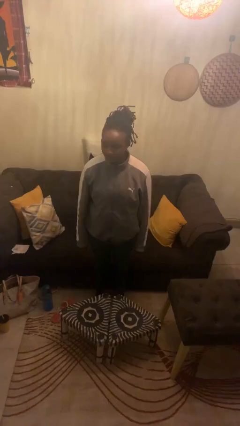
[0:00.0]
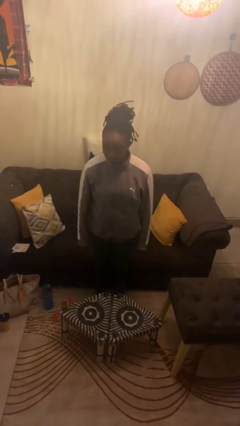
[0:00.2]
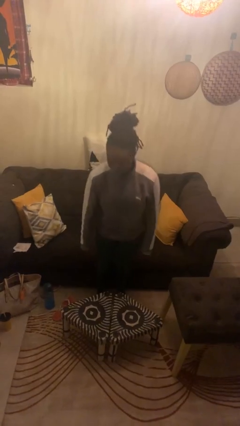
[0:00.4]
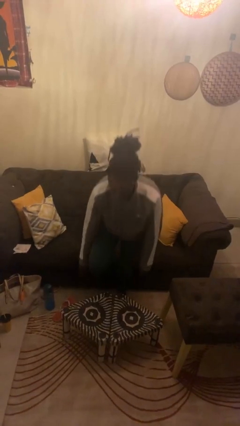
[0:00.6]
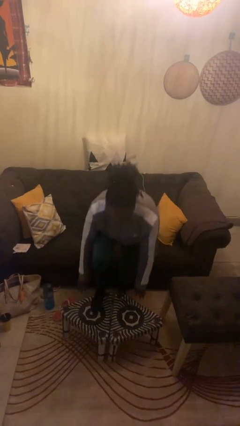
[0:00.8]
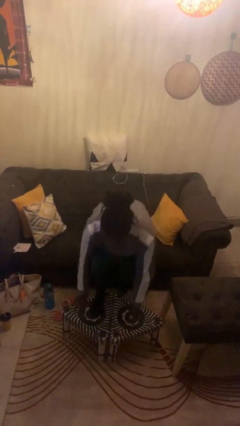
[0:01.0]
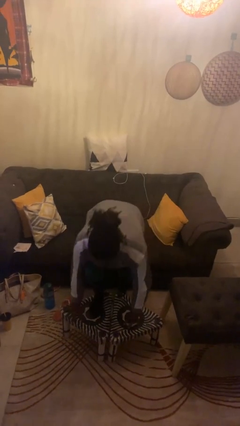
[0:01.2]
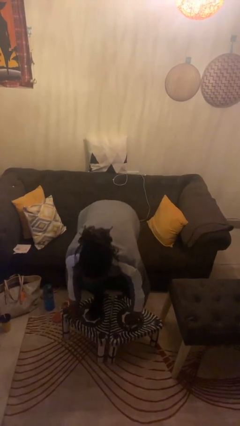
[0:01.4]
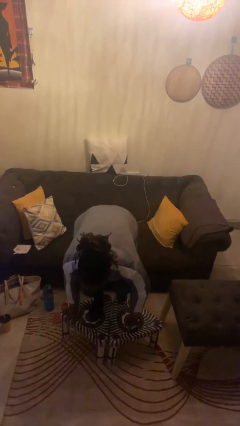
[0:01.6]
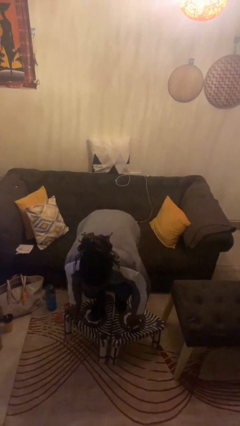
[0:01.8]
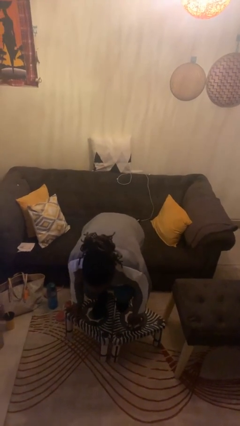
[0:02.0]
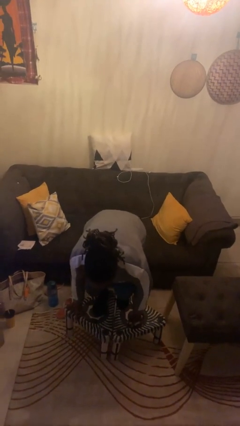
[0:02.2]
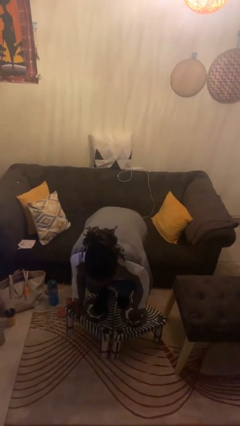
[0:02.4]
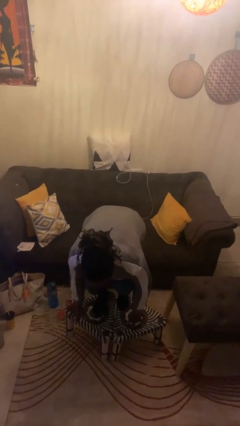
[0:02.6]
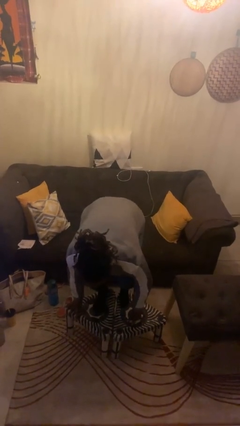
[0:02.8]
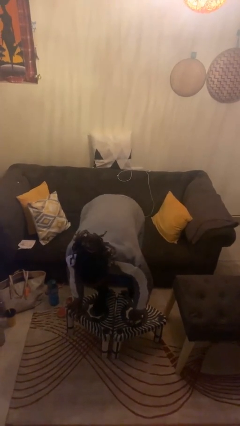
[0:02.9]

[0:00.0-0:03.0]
person climbs on table

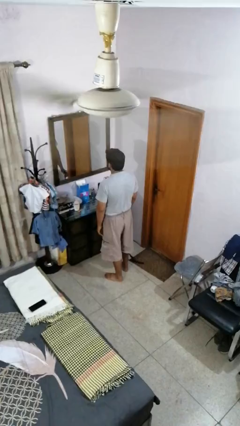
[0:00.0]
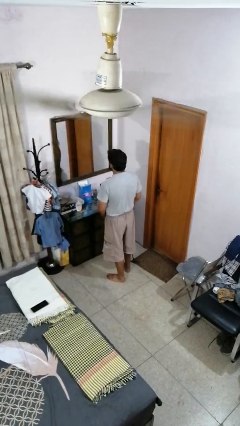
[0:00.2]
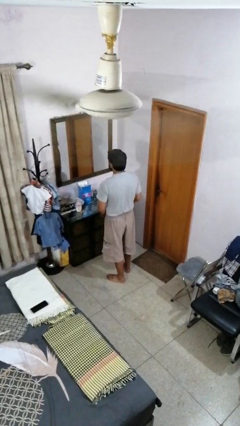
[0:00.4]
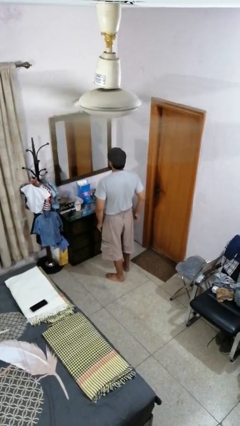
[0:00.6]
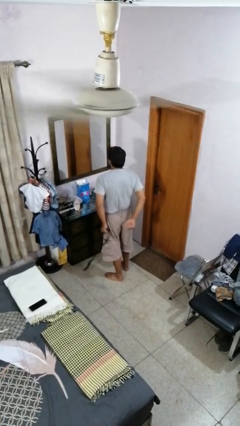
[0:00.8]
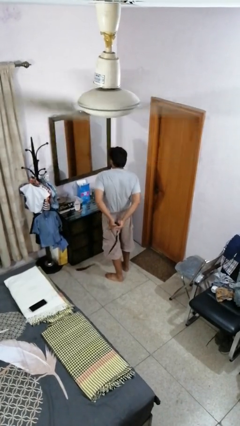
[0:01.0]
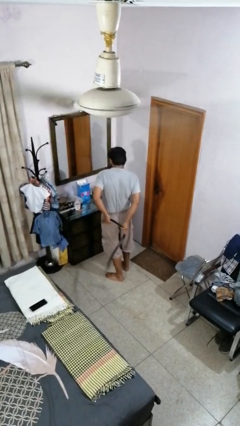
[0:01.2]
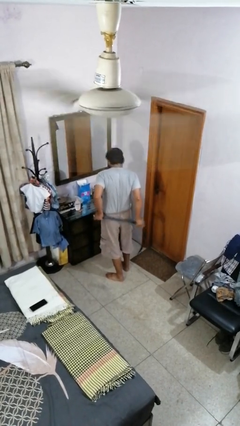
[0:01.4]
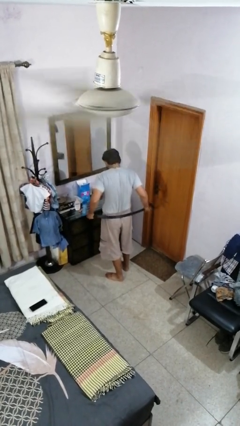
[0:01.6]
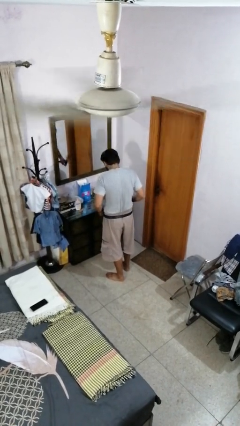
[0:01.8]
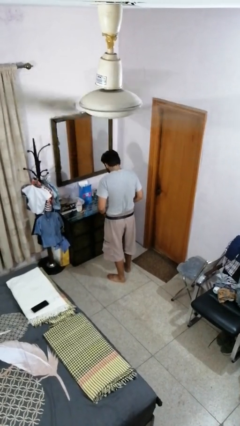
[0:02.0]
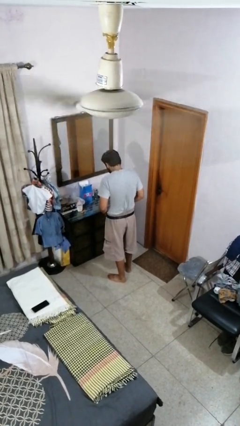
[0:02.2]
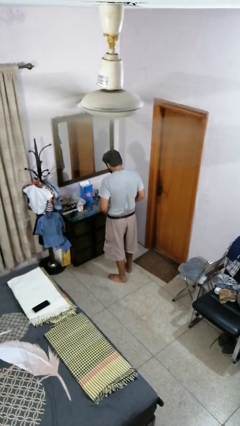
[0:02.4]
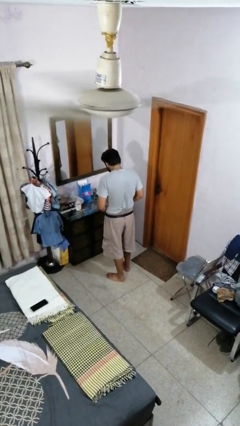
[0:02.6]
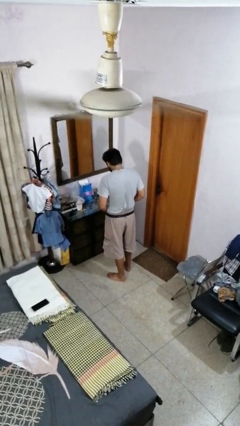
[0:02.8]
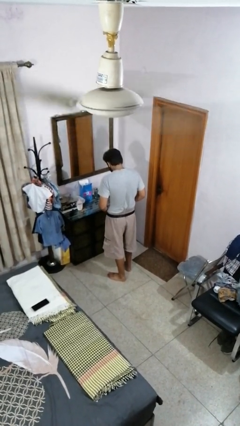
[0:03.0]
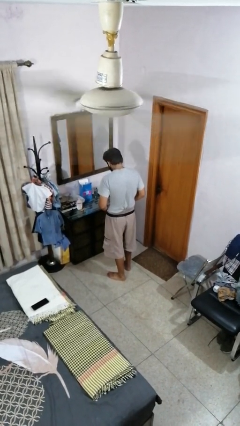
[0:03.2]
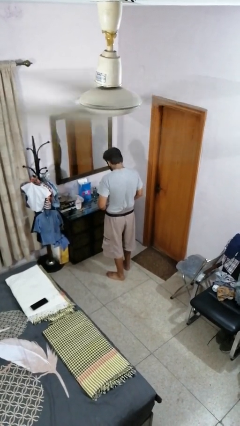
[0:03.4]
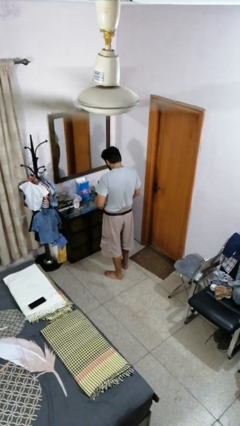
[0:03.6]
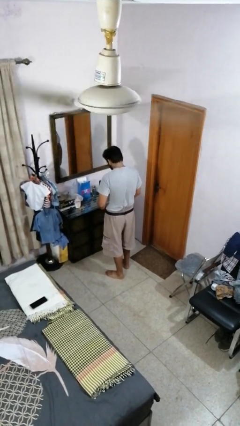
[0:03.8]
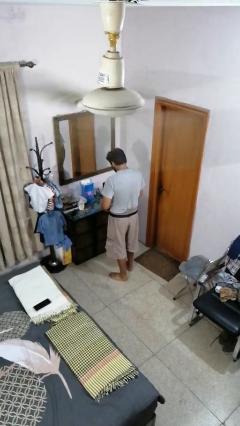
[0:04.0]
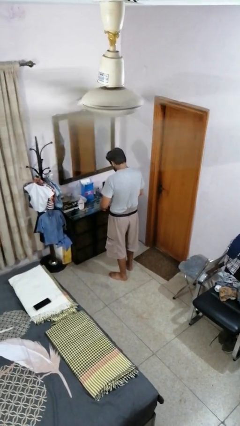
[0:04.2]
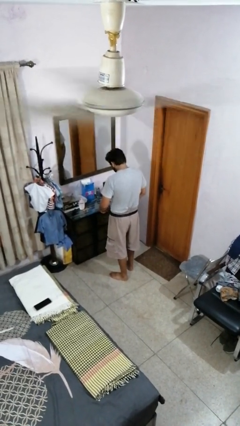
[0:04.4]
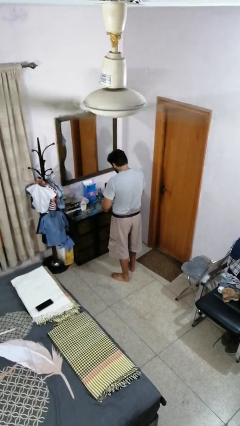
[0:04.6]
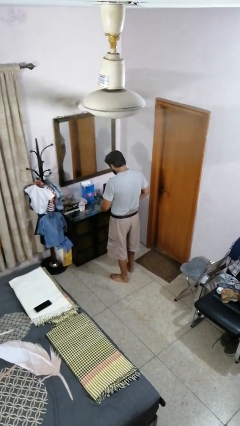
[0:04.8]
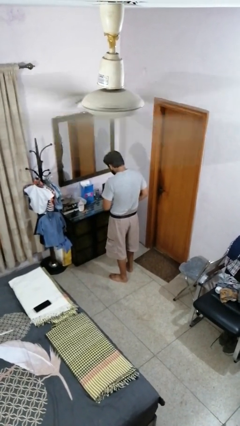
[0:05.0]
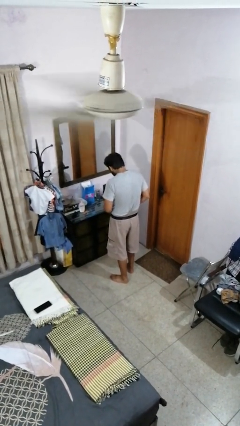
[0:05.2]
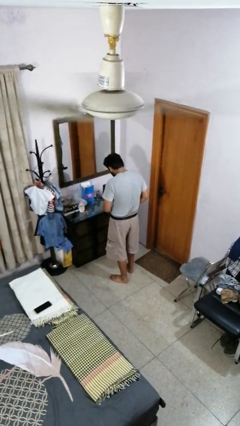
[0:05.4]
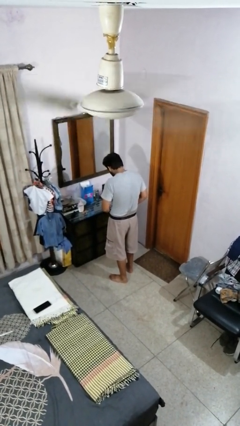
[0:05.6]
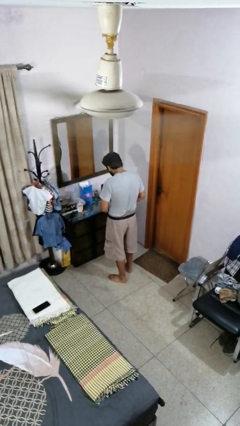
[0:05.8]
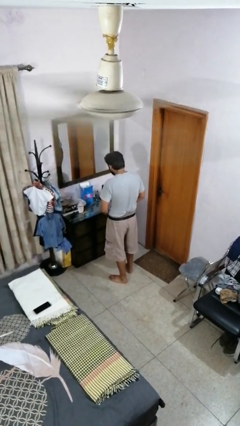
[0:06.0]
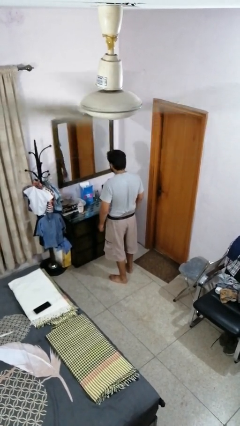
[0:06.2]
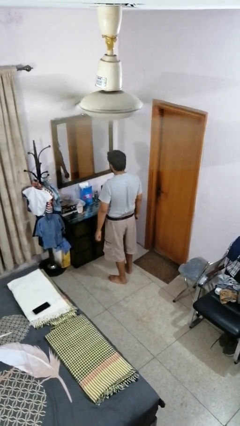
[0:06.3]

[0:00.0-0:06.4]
person puts on belt

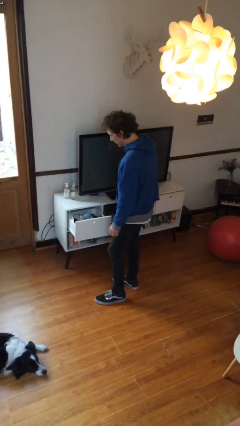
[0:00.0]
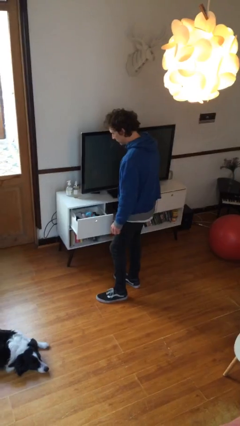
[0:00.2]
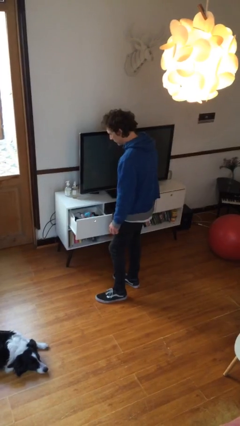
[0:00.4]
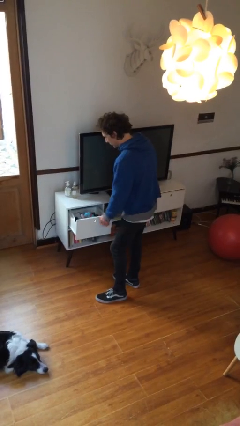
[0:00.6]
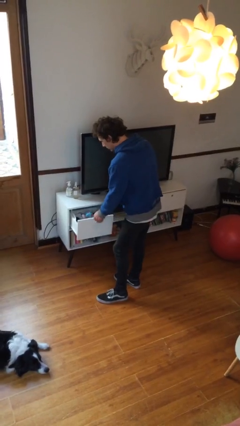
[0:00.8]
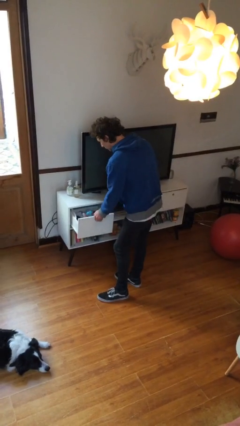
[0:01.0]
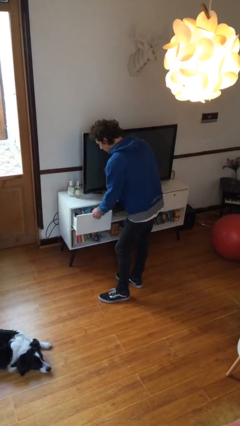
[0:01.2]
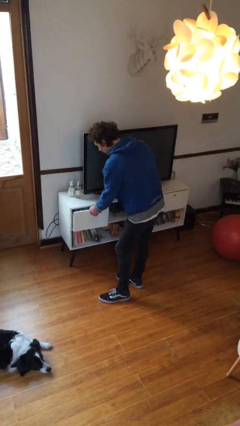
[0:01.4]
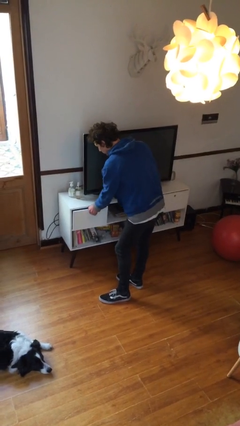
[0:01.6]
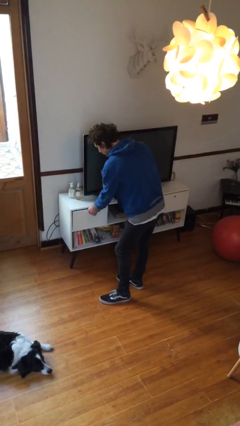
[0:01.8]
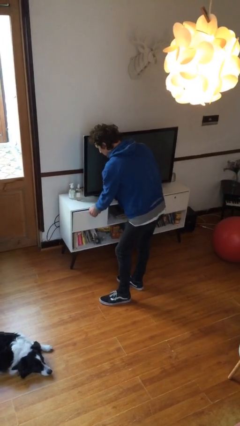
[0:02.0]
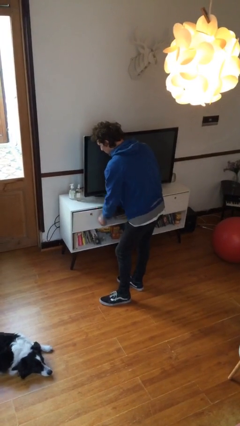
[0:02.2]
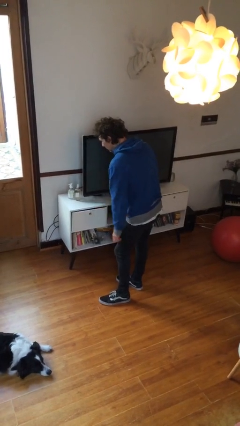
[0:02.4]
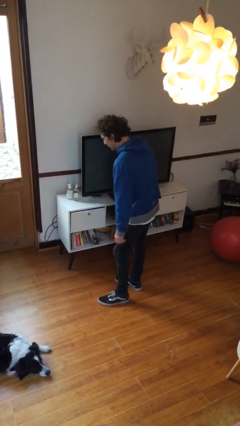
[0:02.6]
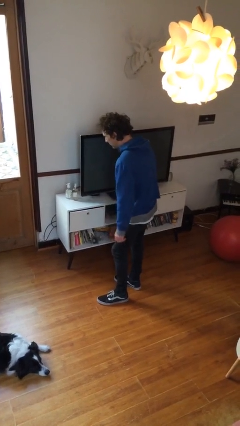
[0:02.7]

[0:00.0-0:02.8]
person closes dresser drawer

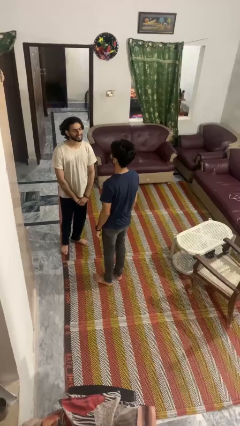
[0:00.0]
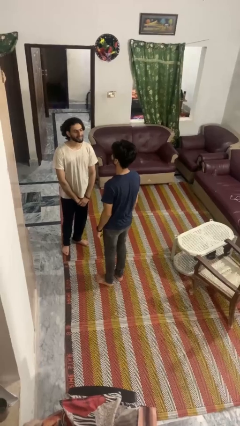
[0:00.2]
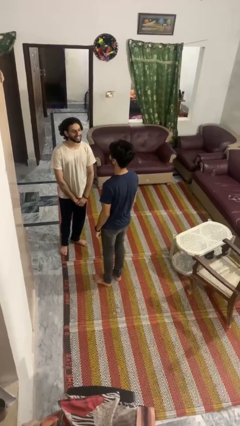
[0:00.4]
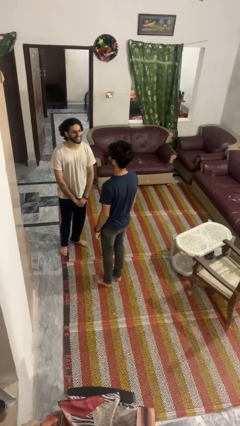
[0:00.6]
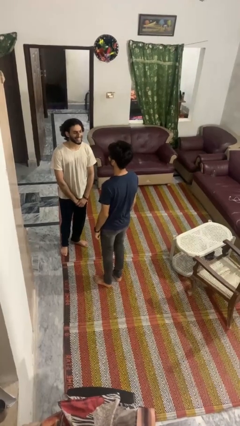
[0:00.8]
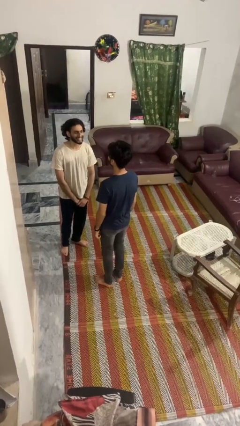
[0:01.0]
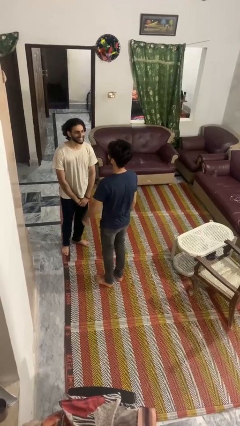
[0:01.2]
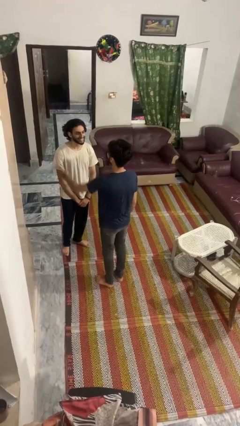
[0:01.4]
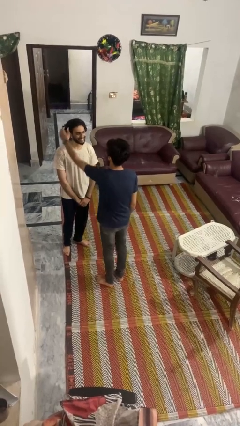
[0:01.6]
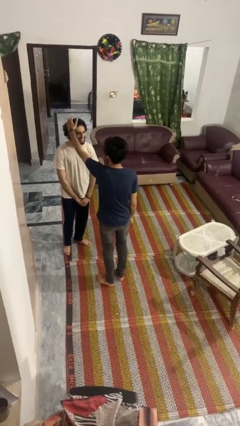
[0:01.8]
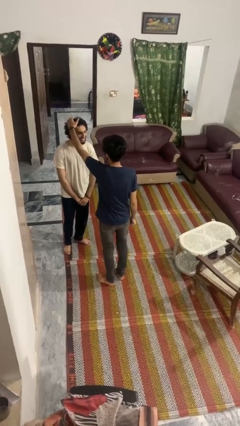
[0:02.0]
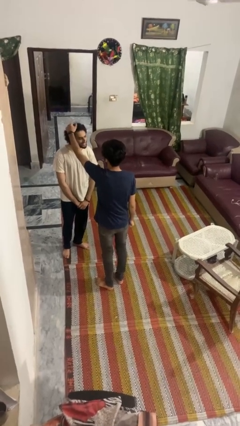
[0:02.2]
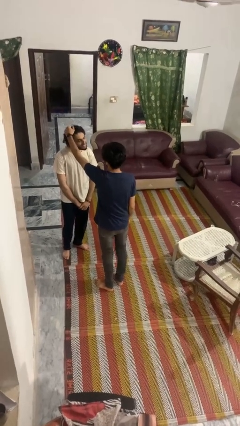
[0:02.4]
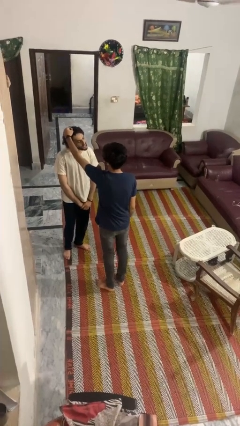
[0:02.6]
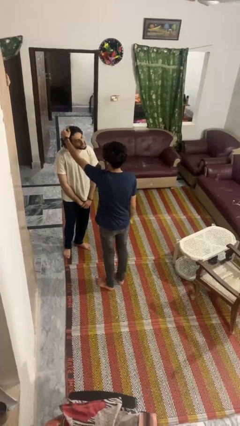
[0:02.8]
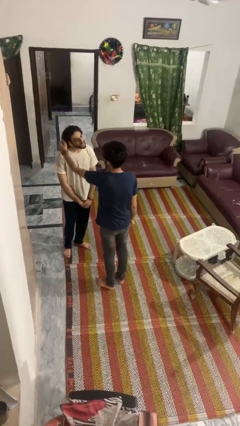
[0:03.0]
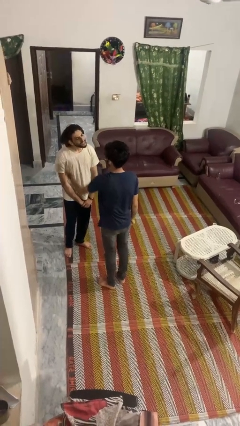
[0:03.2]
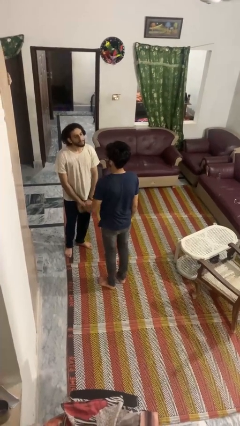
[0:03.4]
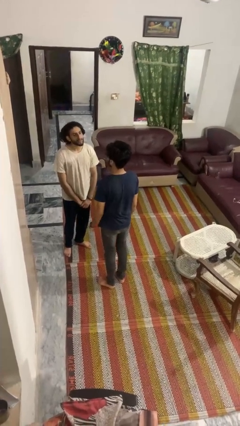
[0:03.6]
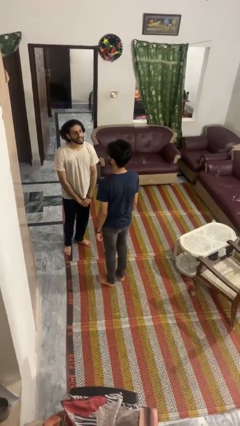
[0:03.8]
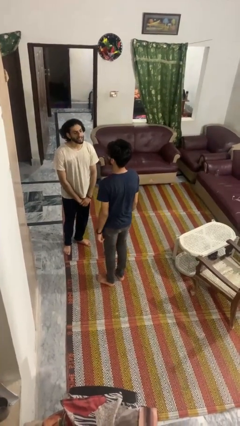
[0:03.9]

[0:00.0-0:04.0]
person grabs person by hair

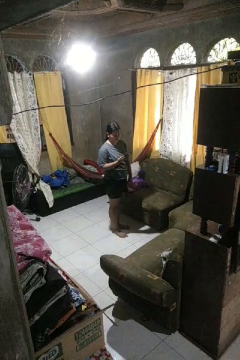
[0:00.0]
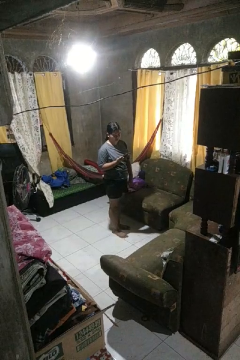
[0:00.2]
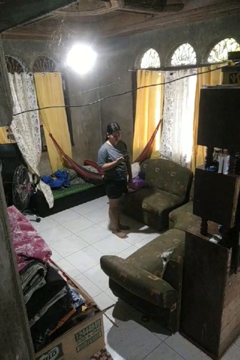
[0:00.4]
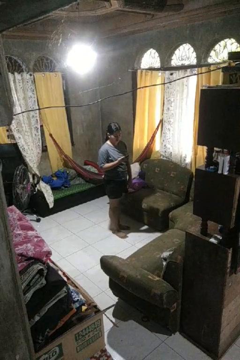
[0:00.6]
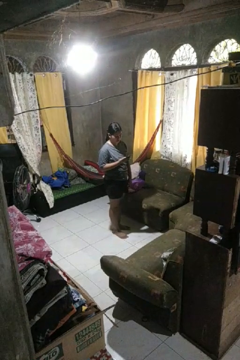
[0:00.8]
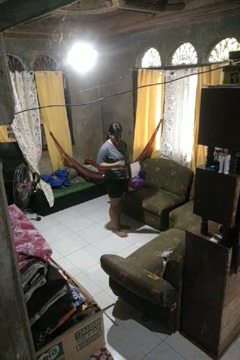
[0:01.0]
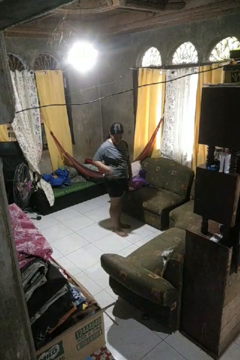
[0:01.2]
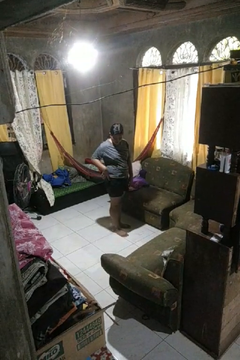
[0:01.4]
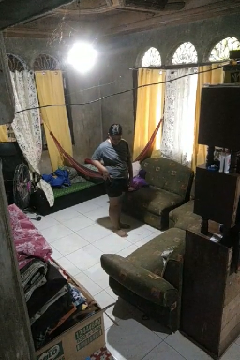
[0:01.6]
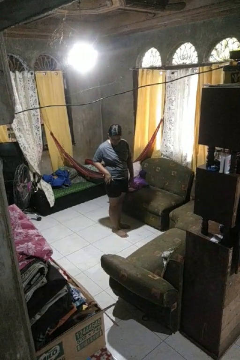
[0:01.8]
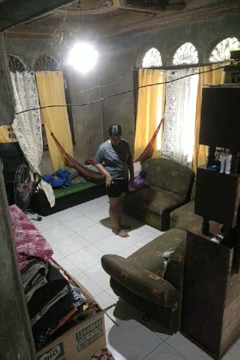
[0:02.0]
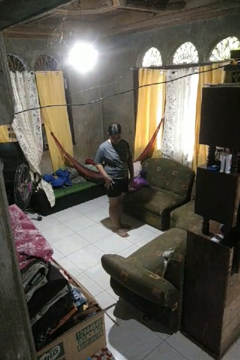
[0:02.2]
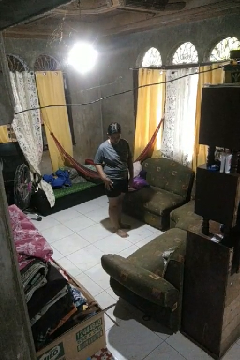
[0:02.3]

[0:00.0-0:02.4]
person puts phone into pocket
